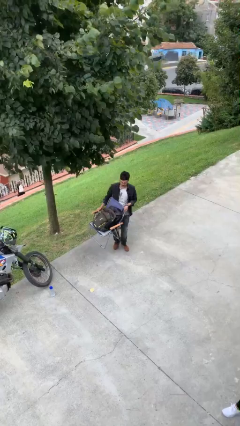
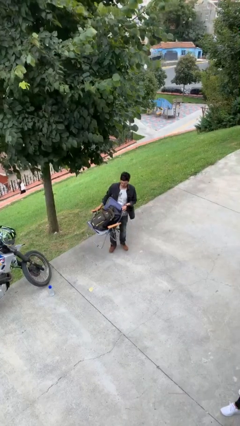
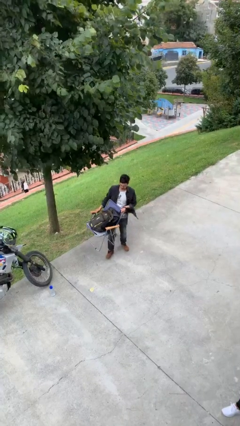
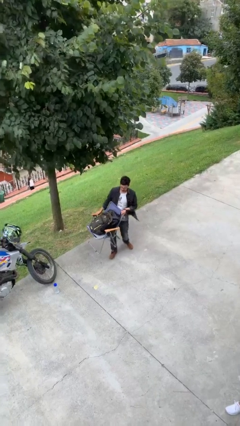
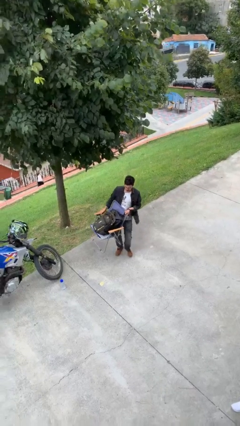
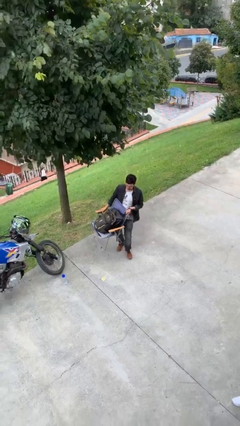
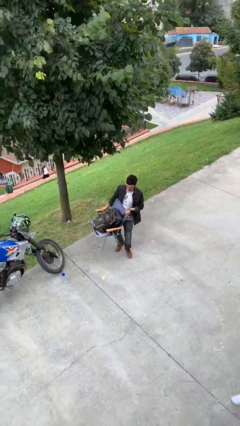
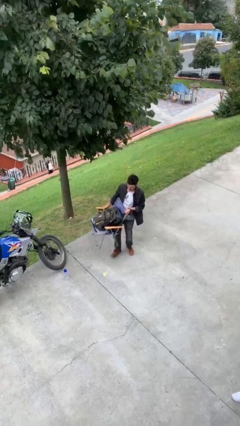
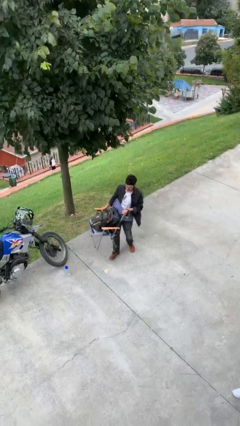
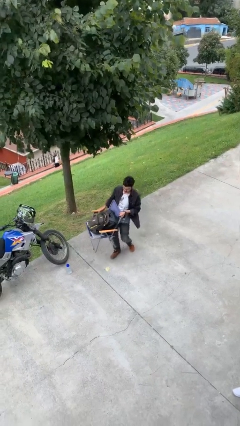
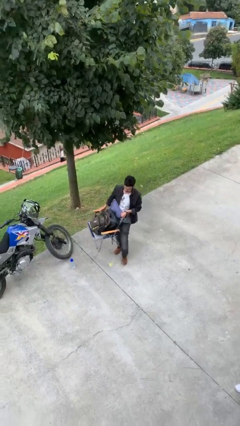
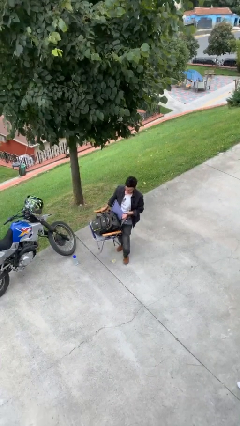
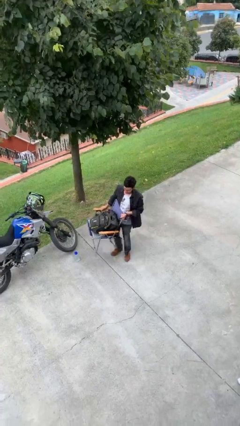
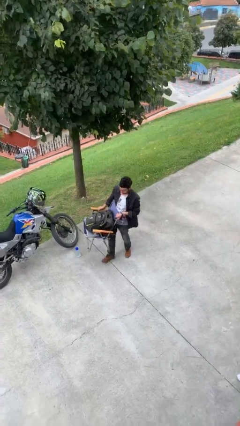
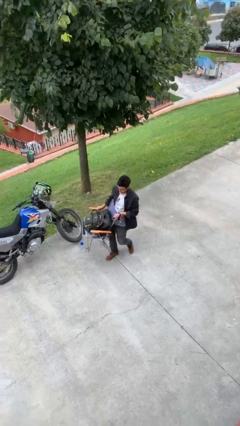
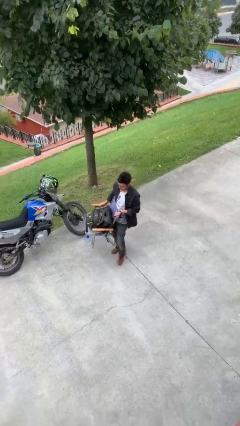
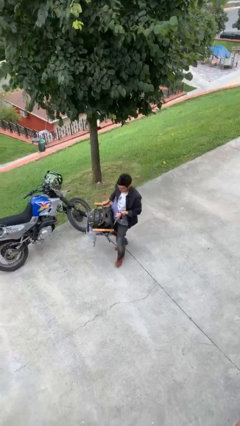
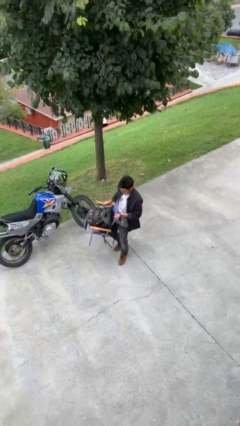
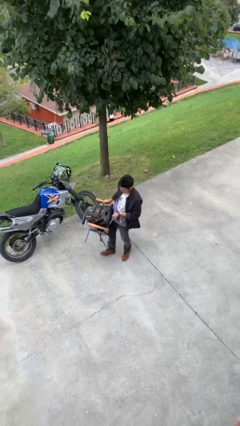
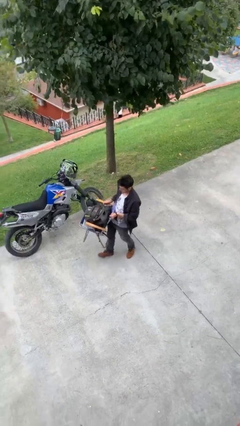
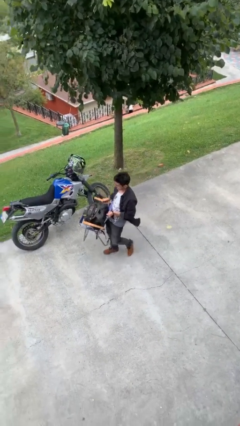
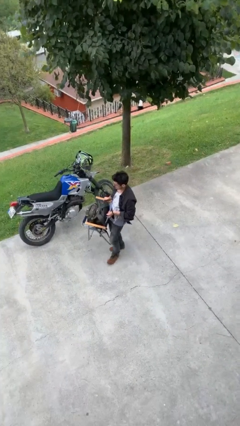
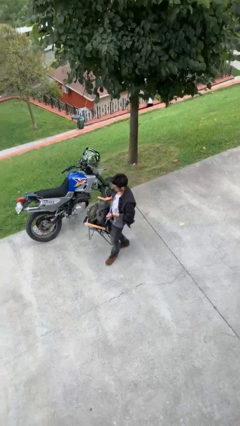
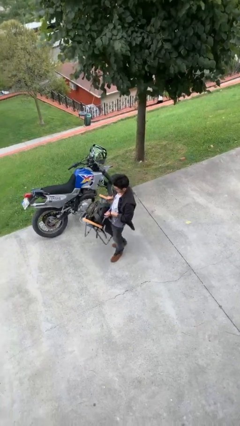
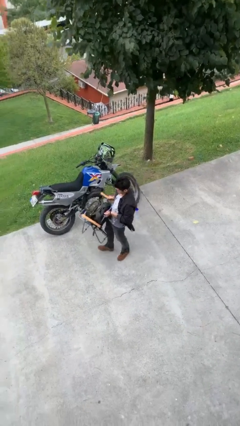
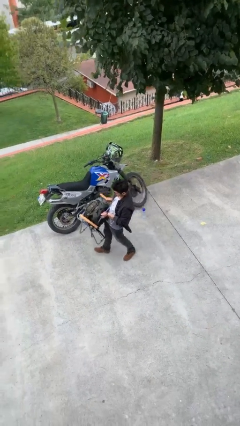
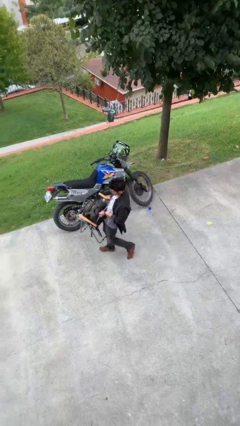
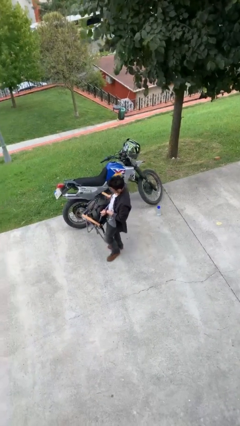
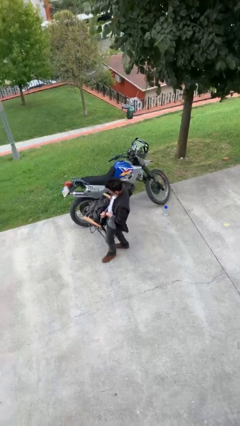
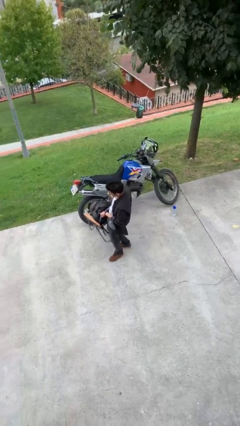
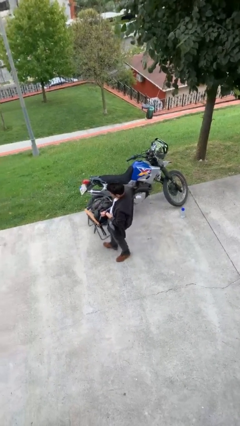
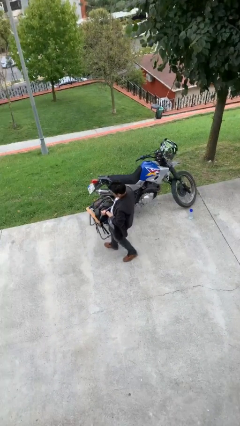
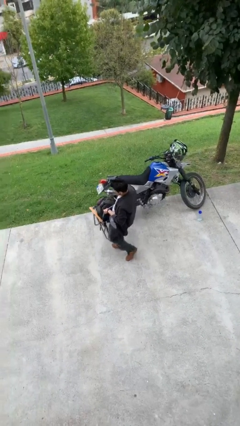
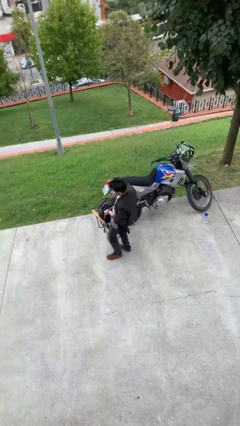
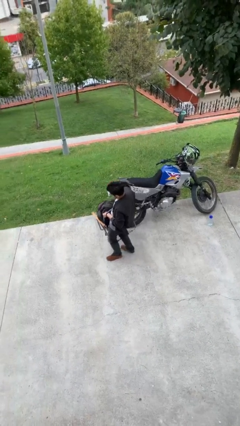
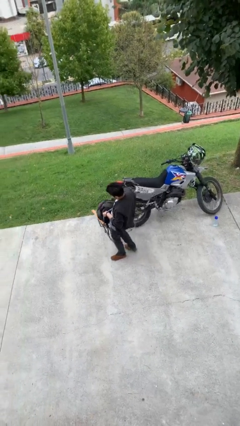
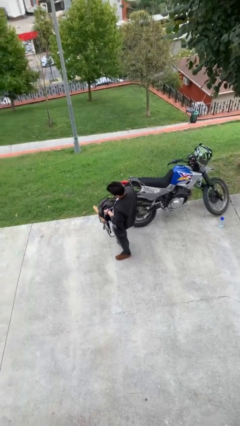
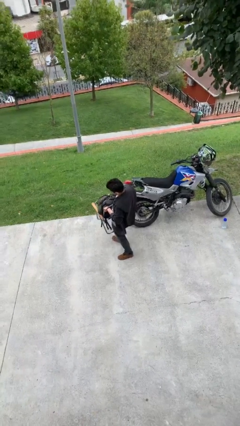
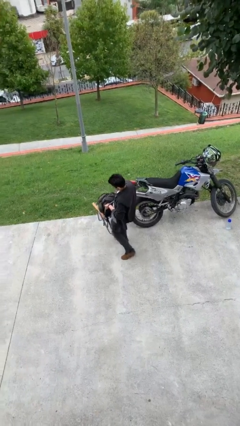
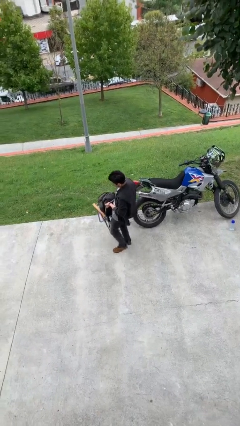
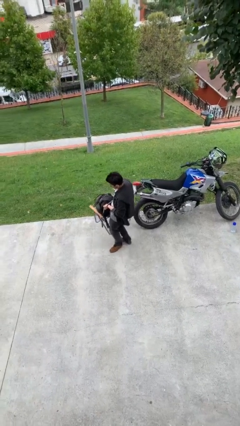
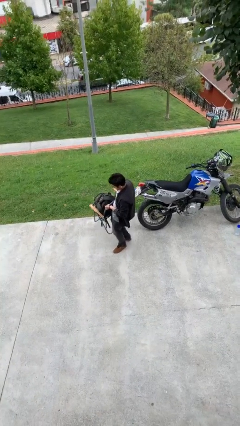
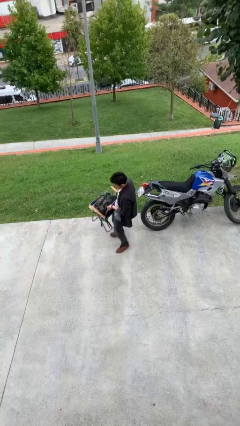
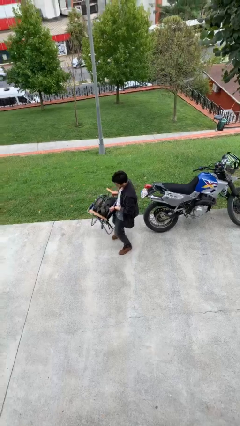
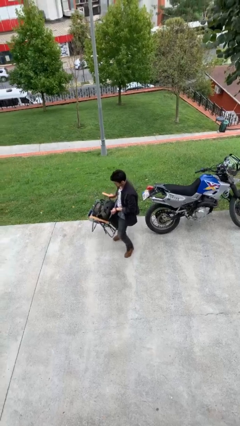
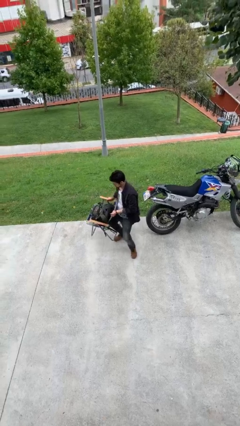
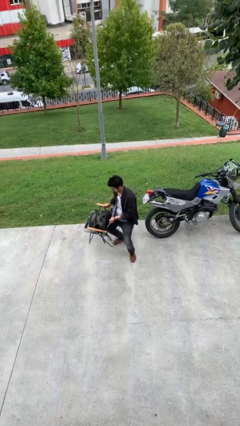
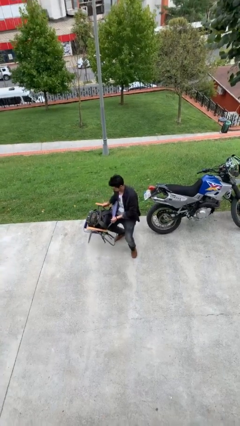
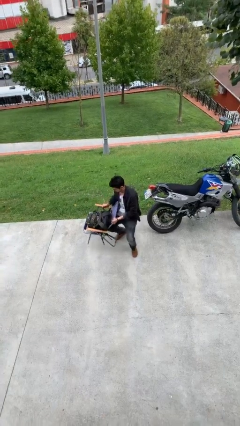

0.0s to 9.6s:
person carries heavy object

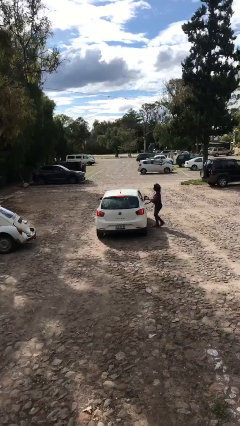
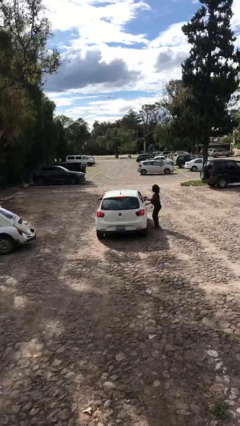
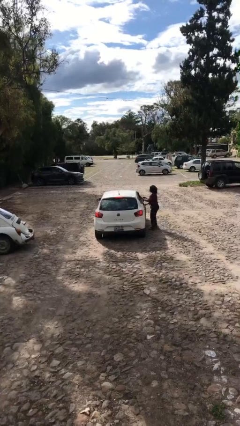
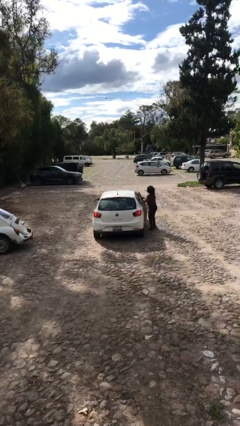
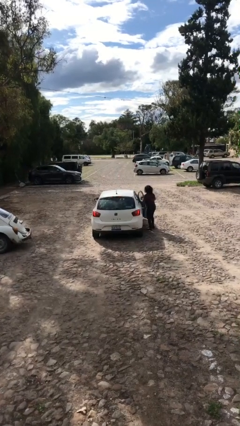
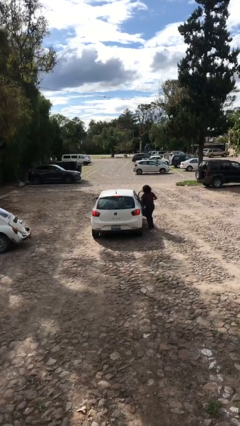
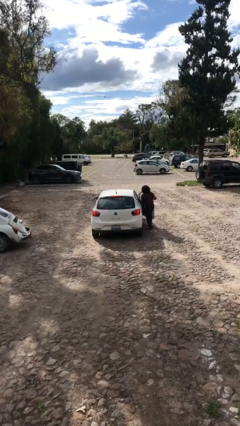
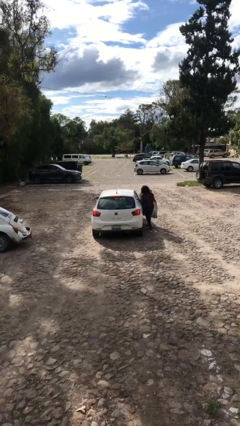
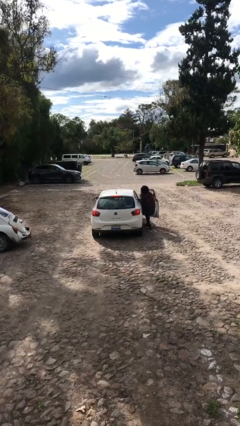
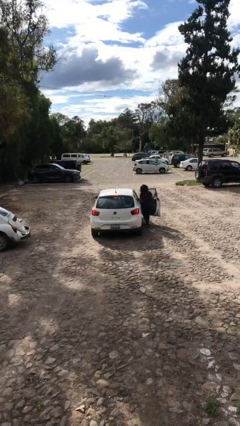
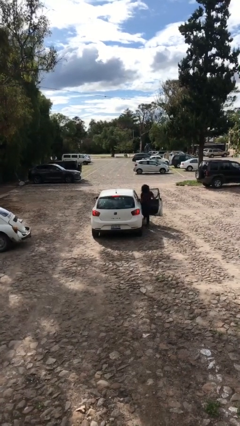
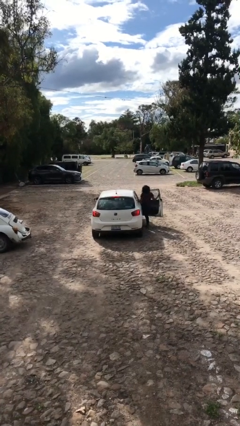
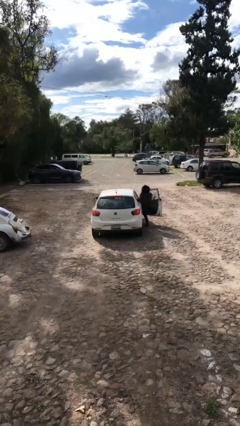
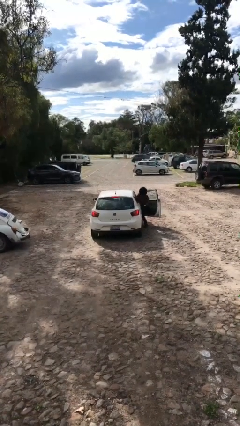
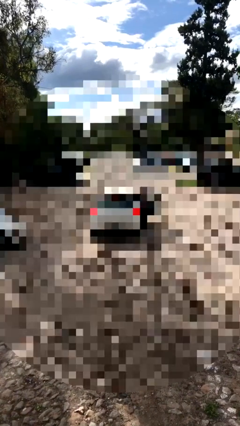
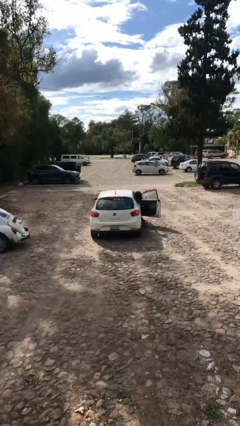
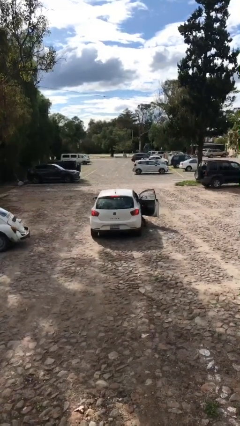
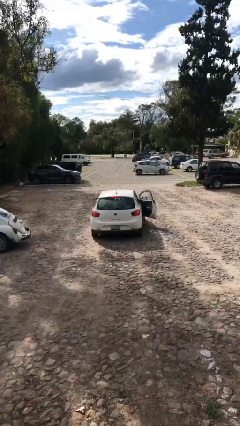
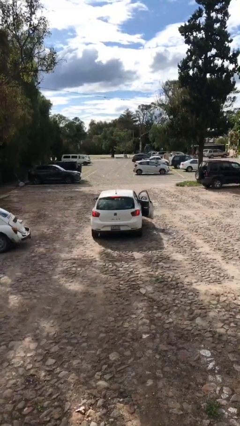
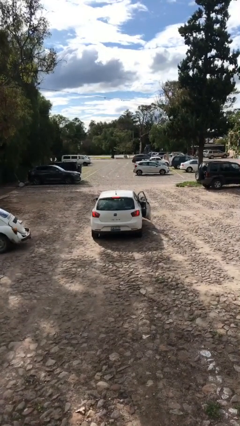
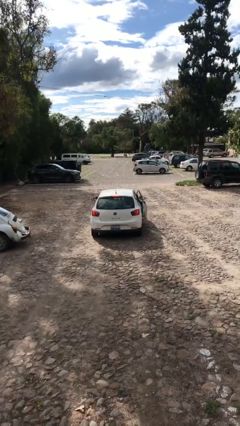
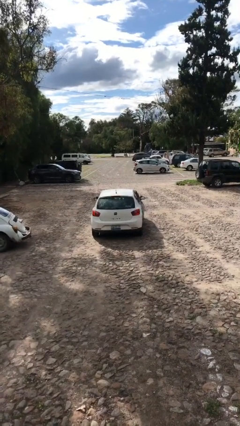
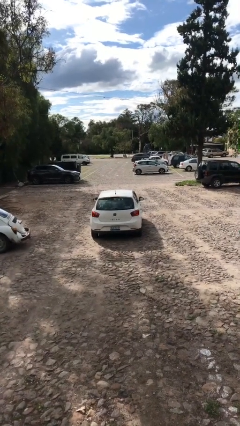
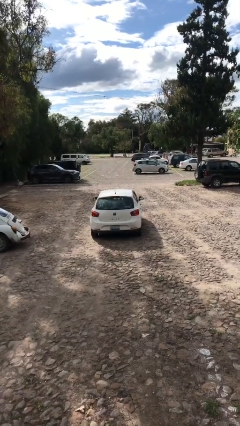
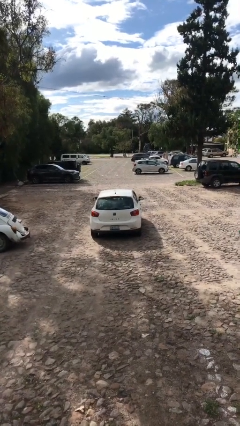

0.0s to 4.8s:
car picks up person

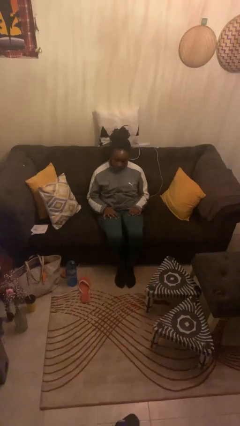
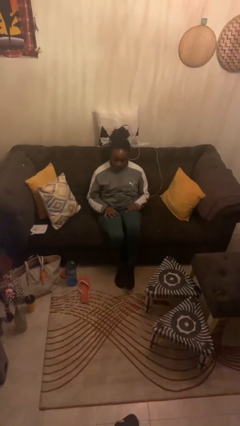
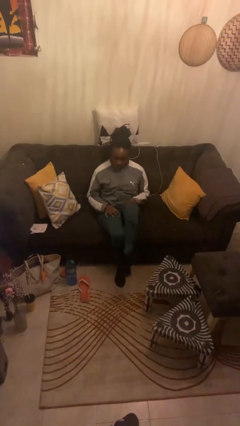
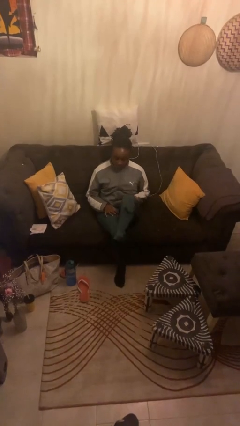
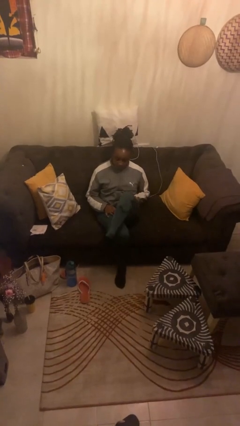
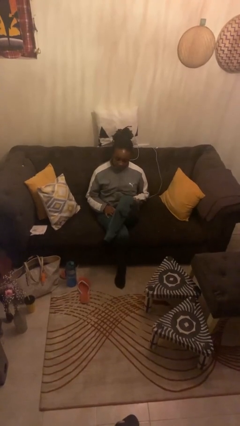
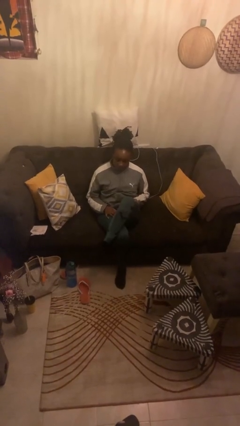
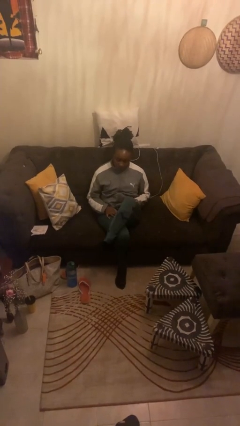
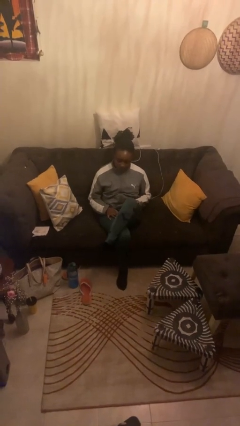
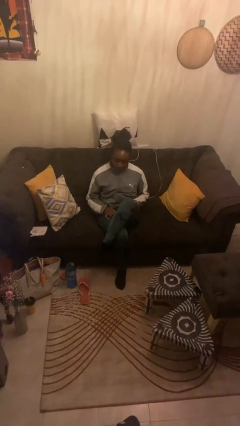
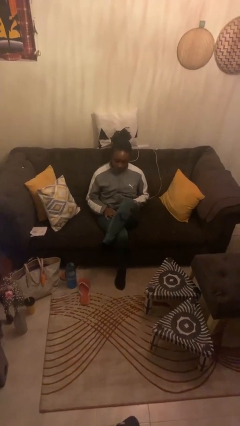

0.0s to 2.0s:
person crosses legs

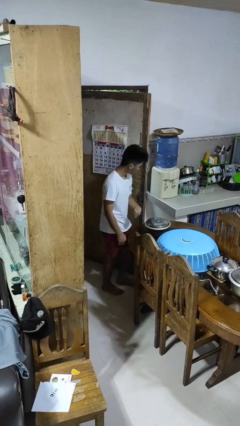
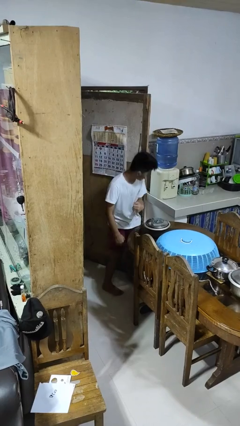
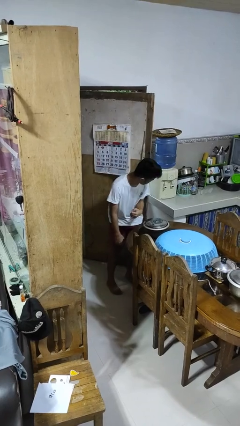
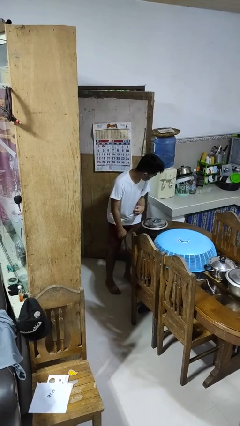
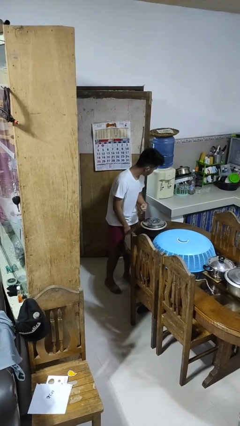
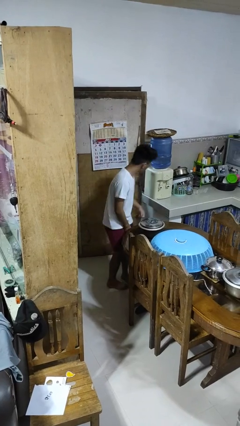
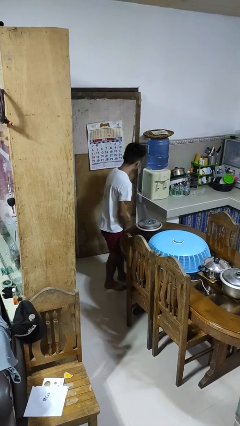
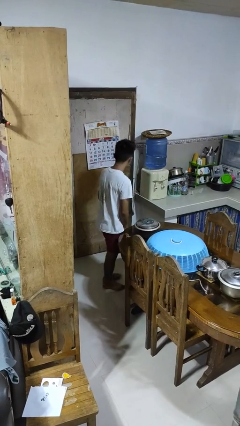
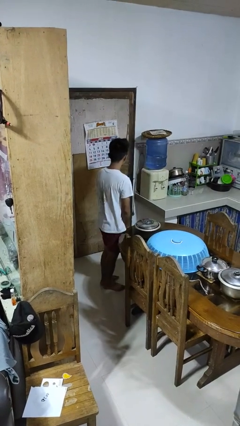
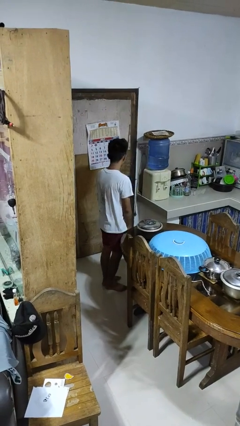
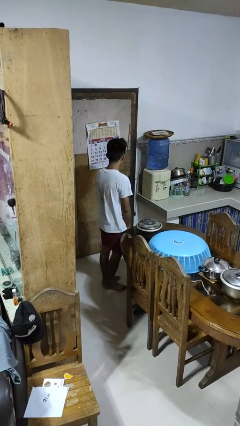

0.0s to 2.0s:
person closes door with hip
